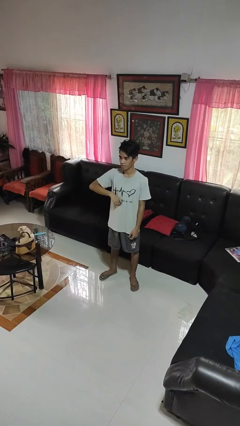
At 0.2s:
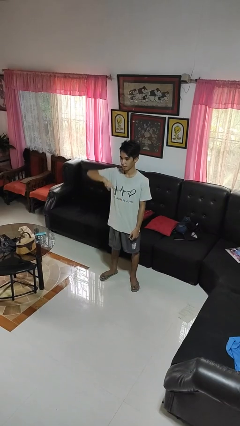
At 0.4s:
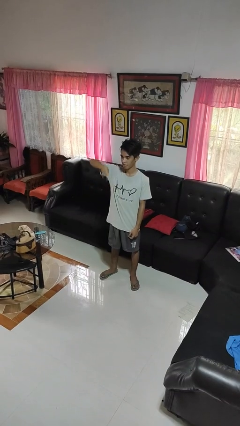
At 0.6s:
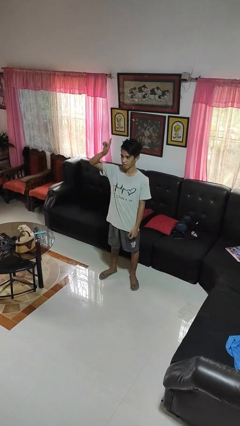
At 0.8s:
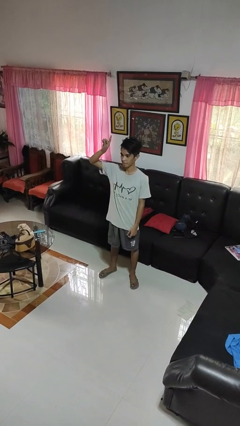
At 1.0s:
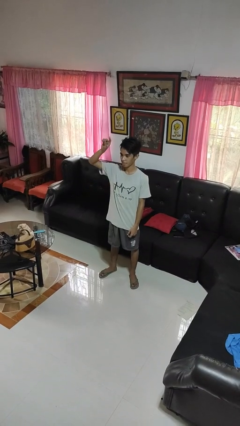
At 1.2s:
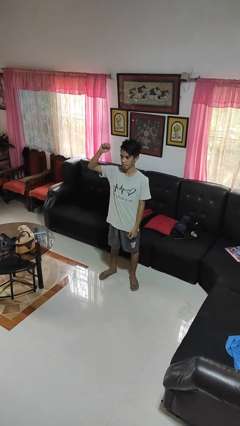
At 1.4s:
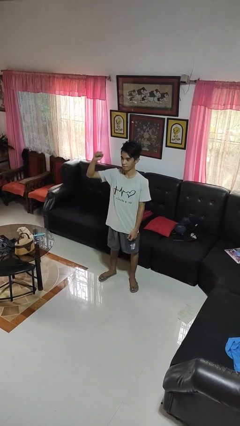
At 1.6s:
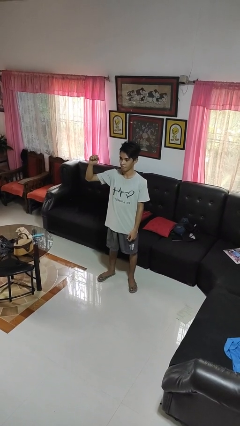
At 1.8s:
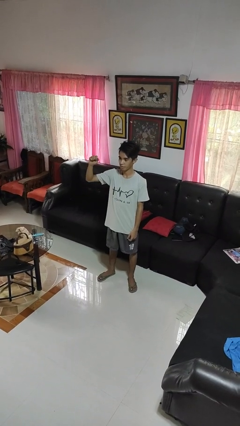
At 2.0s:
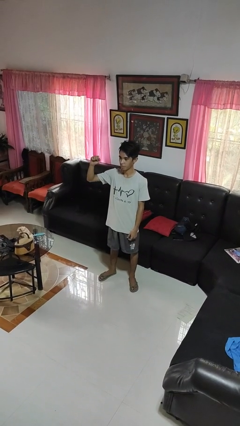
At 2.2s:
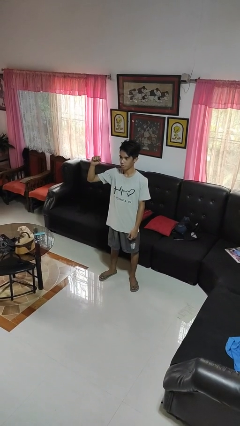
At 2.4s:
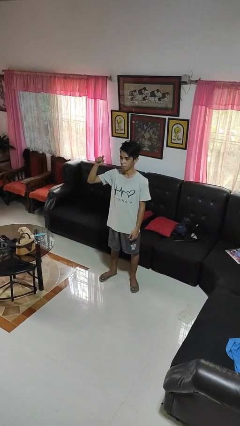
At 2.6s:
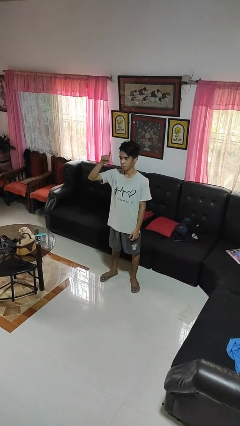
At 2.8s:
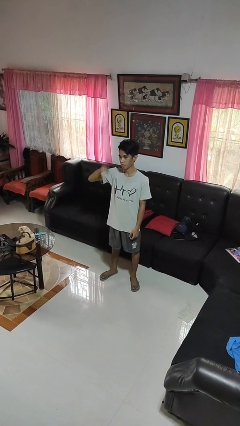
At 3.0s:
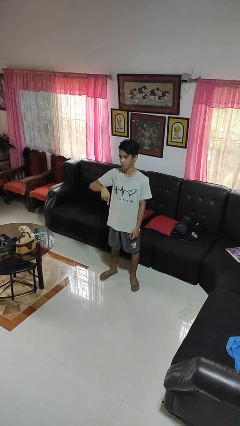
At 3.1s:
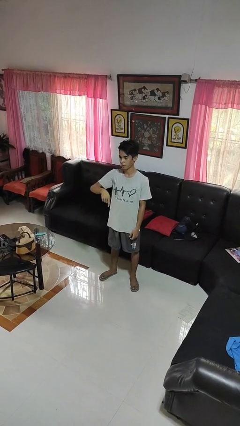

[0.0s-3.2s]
person gestures swipe up

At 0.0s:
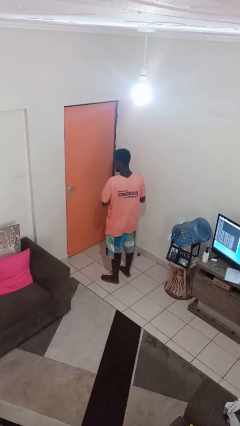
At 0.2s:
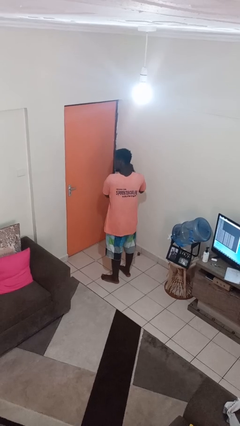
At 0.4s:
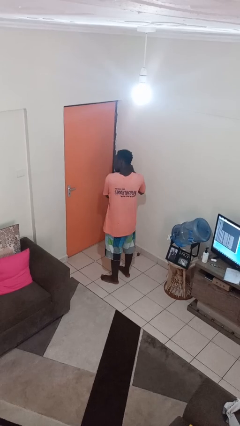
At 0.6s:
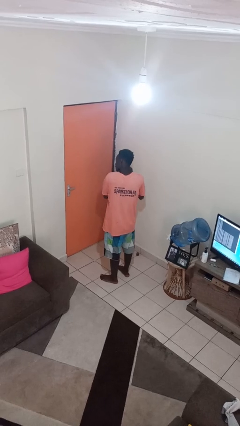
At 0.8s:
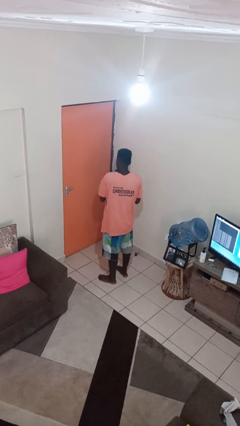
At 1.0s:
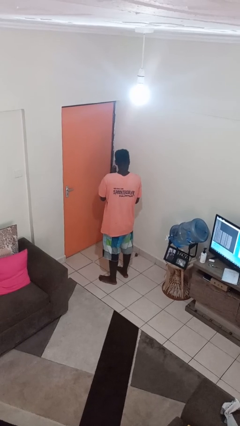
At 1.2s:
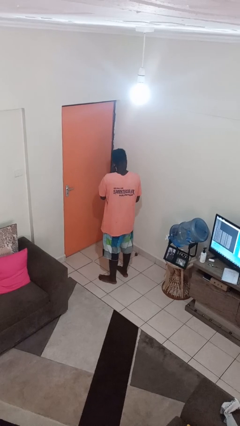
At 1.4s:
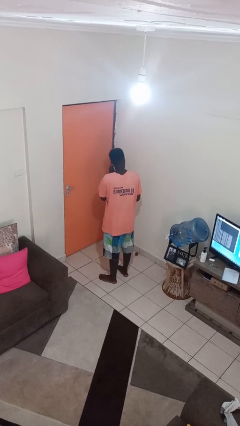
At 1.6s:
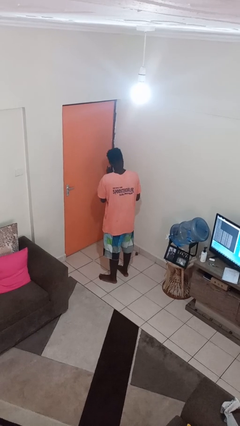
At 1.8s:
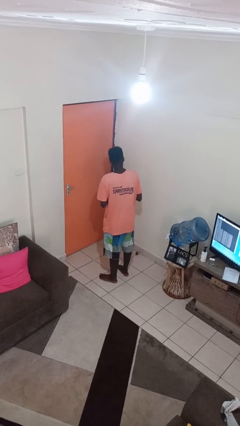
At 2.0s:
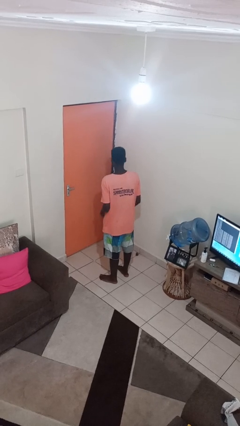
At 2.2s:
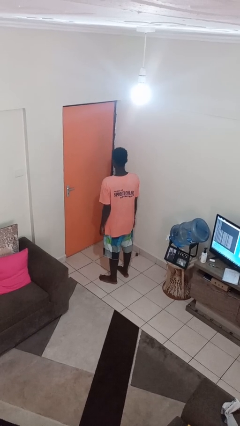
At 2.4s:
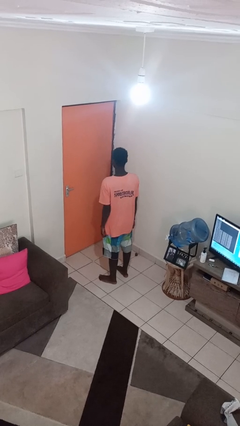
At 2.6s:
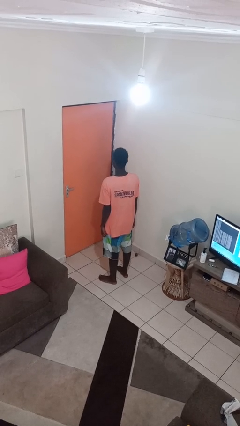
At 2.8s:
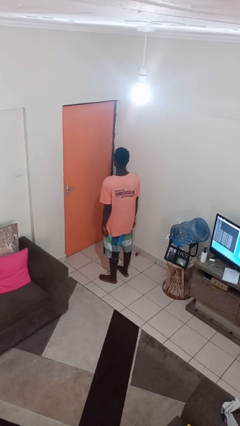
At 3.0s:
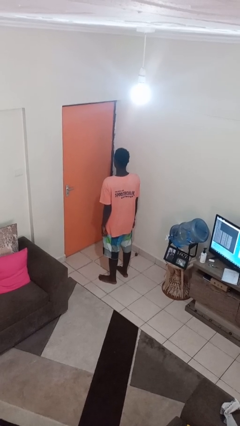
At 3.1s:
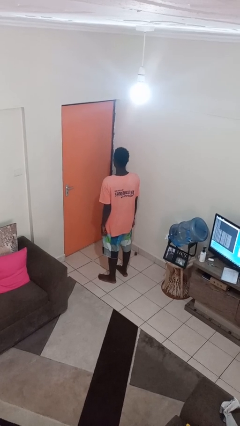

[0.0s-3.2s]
person takes off earrings

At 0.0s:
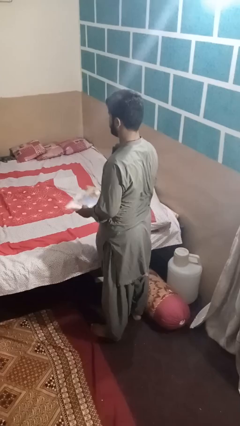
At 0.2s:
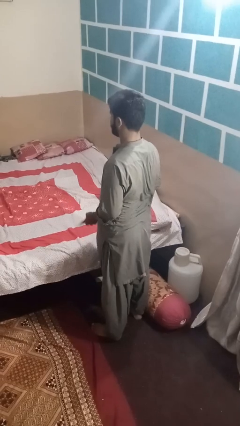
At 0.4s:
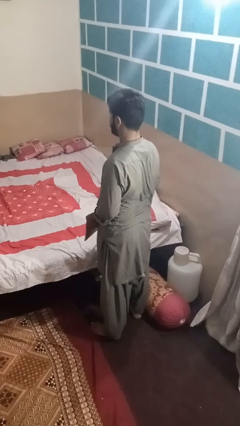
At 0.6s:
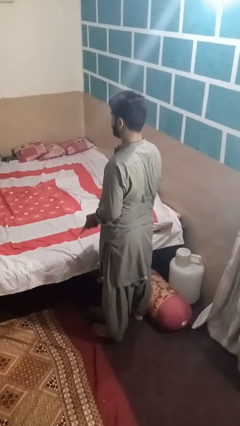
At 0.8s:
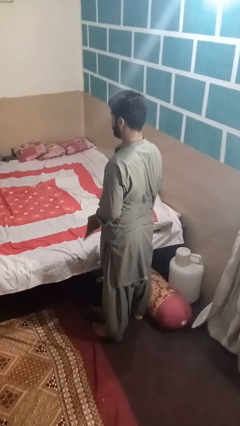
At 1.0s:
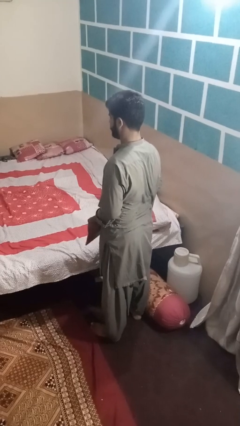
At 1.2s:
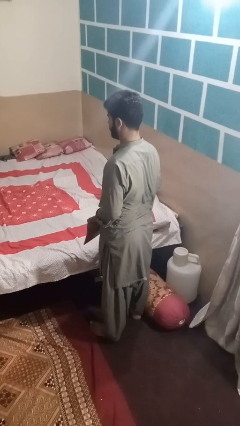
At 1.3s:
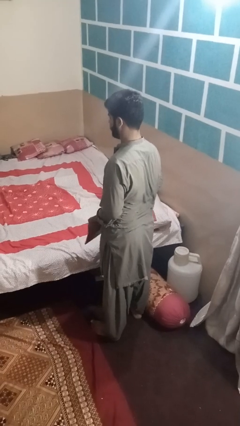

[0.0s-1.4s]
person picks up object from bed

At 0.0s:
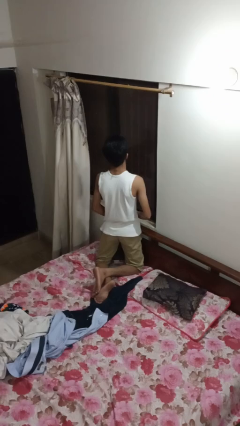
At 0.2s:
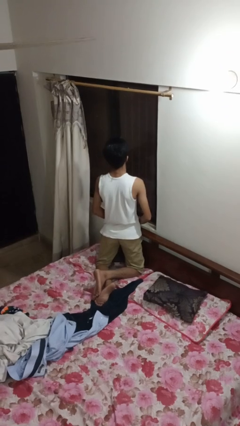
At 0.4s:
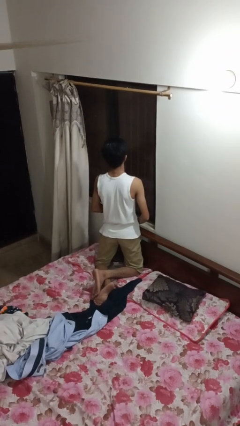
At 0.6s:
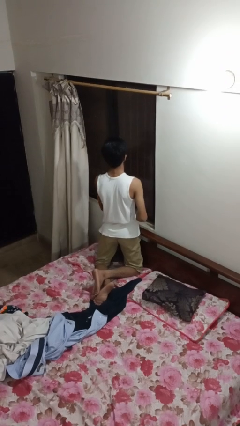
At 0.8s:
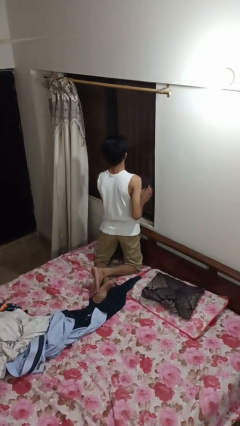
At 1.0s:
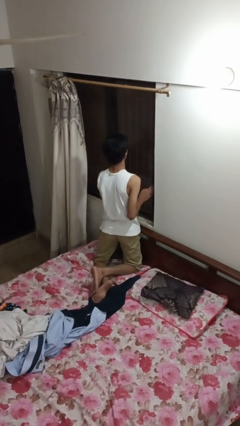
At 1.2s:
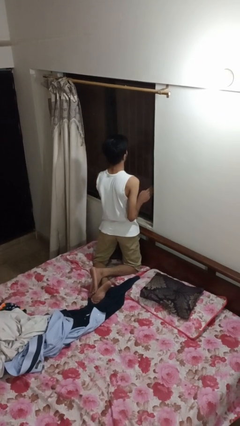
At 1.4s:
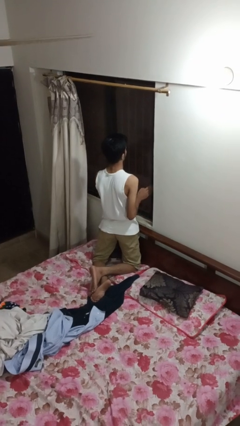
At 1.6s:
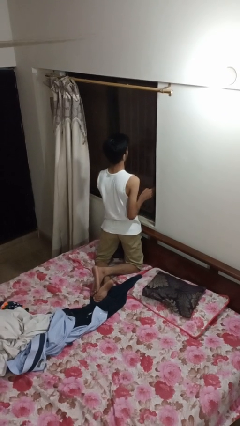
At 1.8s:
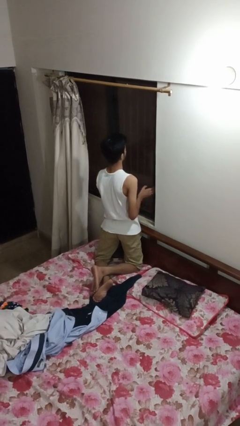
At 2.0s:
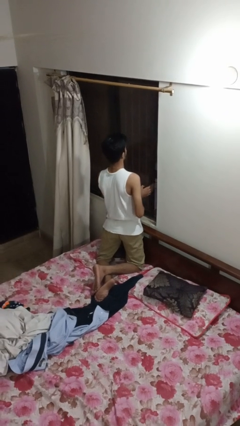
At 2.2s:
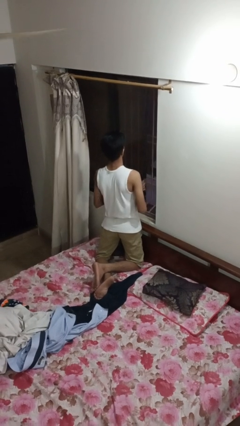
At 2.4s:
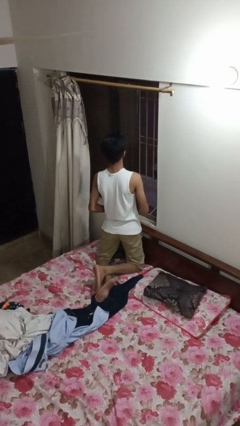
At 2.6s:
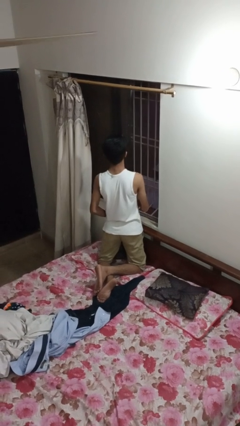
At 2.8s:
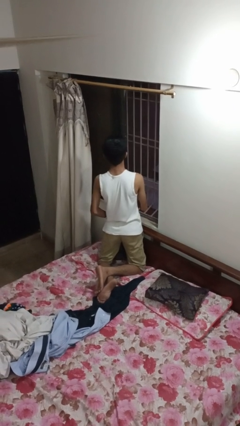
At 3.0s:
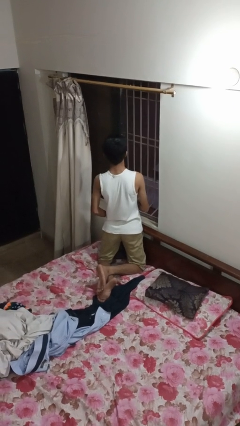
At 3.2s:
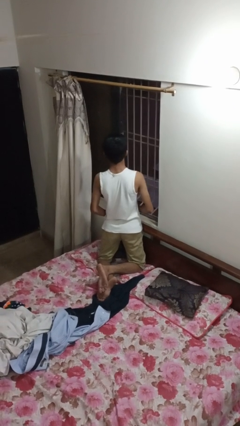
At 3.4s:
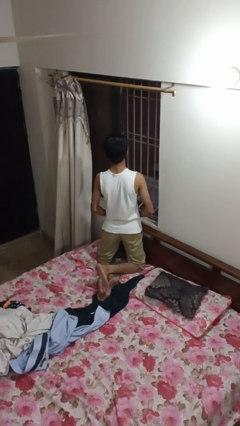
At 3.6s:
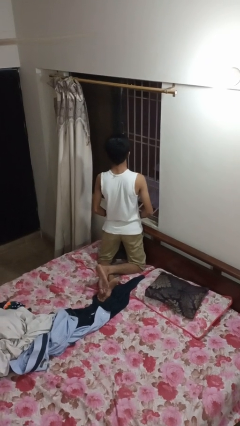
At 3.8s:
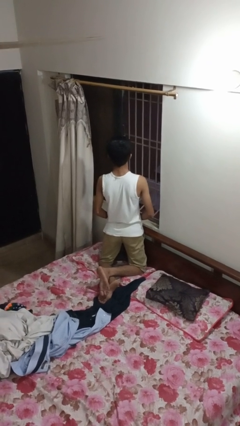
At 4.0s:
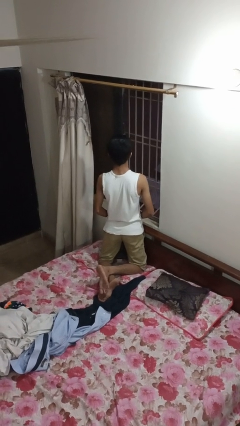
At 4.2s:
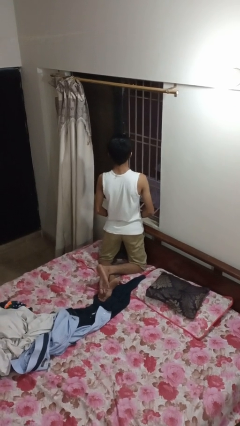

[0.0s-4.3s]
person opens home window

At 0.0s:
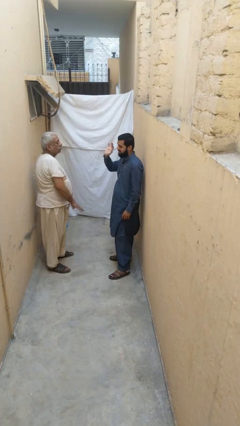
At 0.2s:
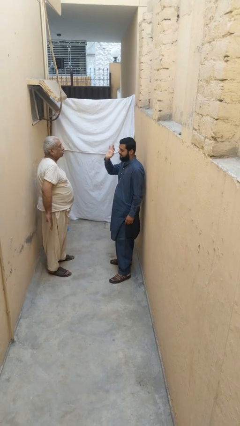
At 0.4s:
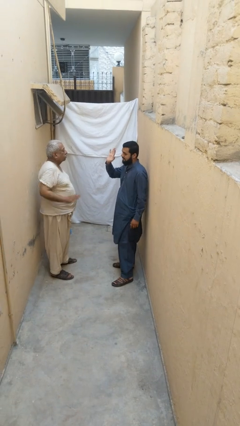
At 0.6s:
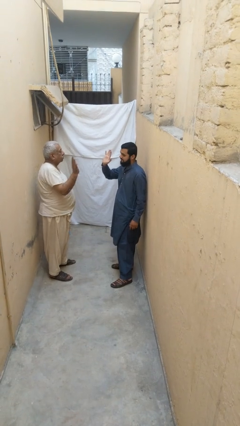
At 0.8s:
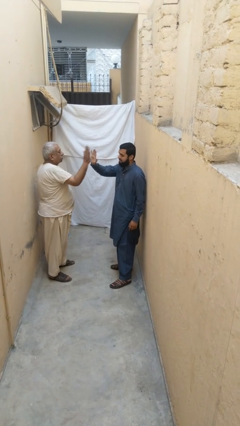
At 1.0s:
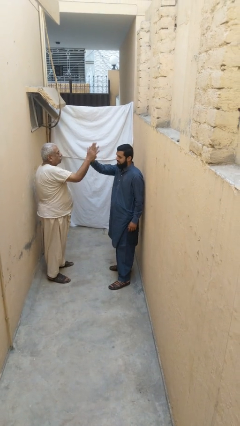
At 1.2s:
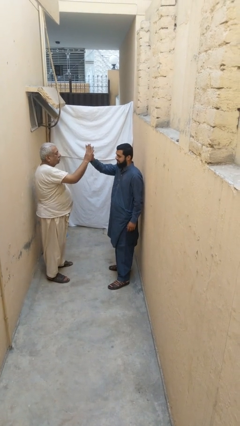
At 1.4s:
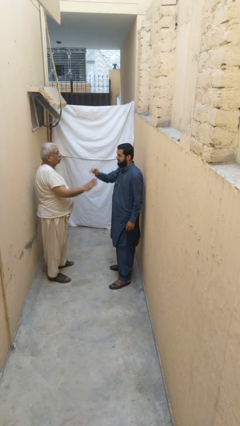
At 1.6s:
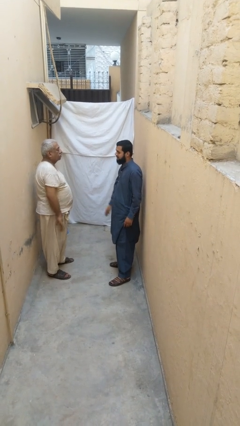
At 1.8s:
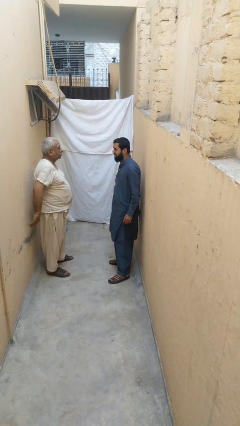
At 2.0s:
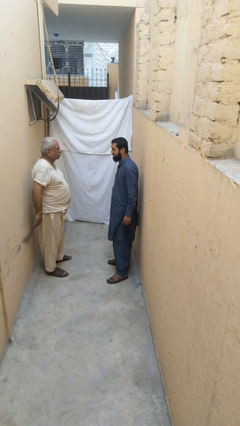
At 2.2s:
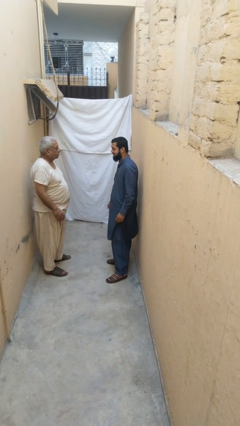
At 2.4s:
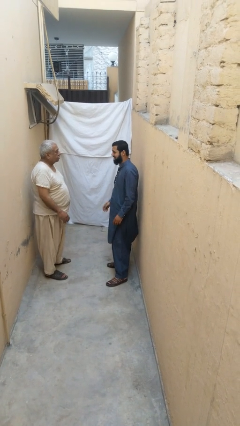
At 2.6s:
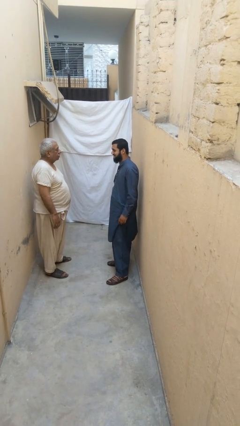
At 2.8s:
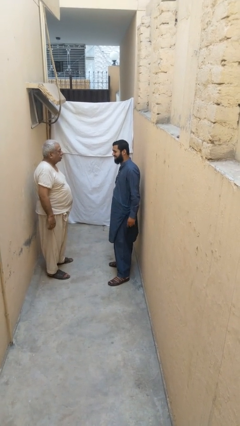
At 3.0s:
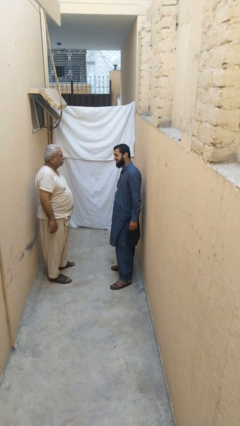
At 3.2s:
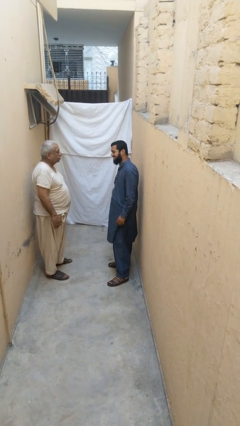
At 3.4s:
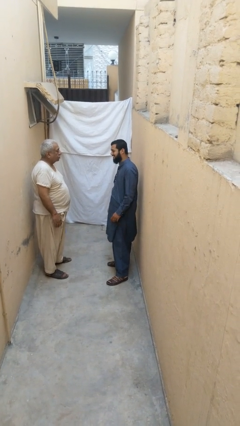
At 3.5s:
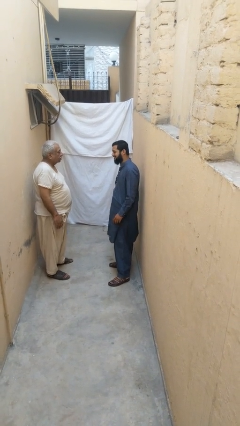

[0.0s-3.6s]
person highfives hand

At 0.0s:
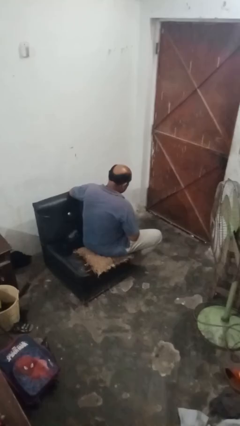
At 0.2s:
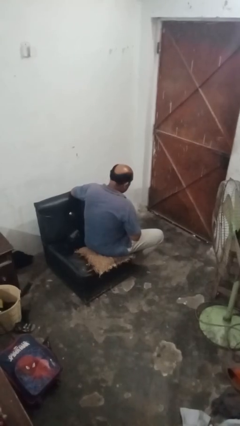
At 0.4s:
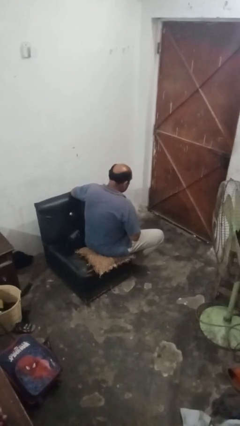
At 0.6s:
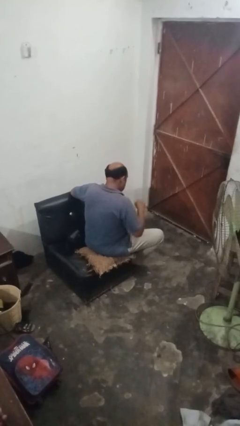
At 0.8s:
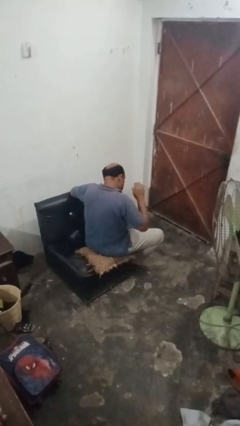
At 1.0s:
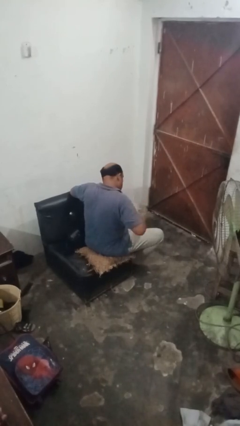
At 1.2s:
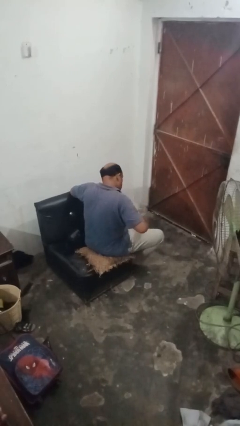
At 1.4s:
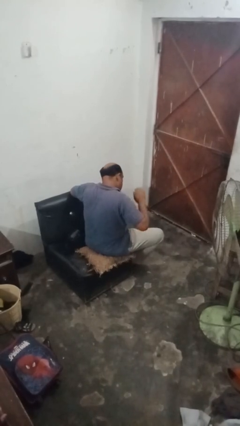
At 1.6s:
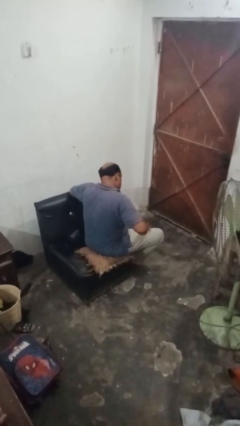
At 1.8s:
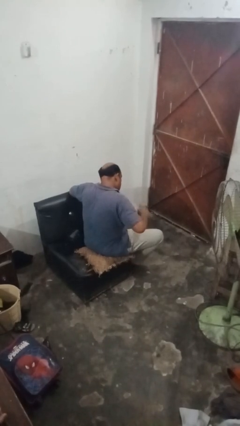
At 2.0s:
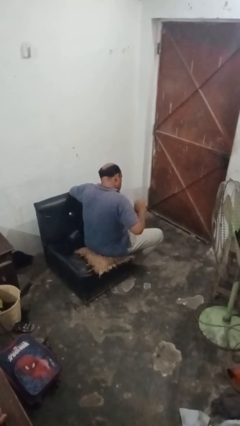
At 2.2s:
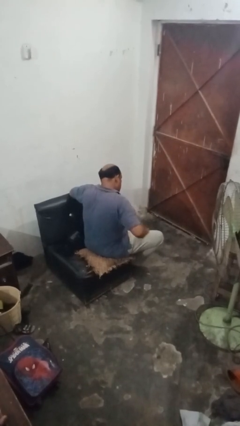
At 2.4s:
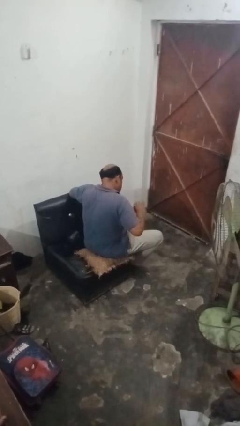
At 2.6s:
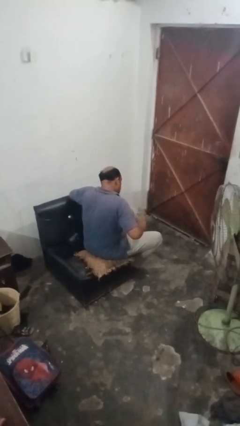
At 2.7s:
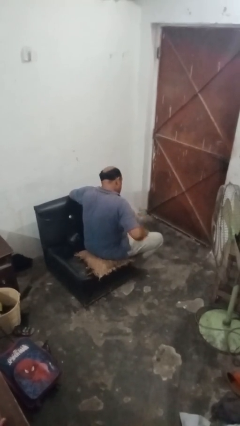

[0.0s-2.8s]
person slaps hands on thighs
